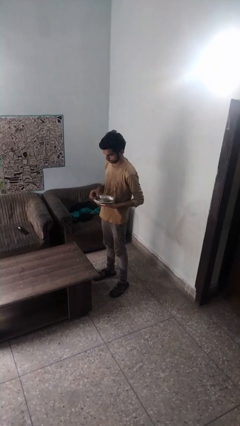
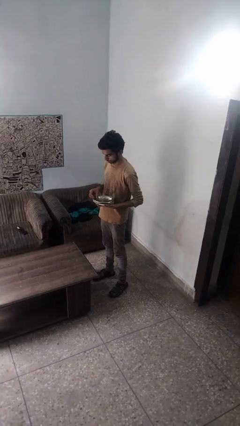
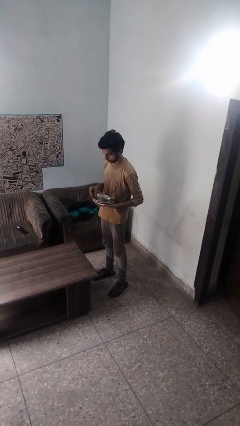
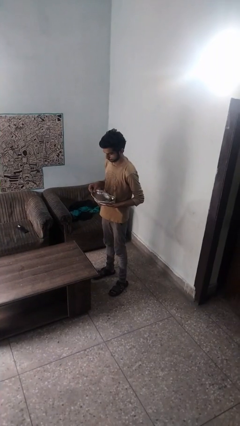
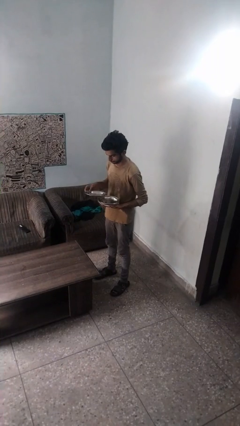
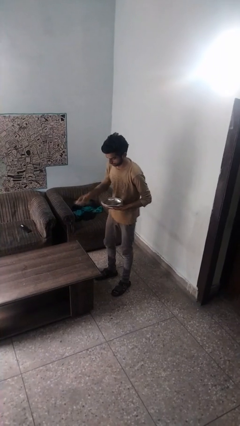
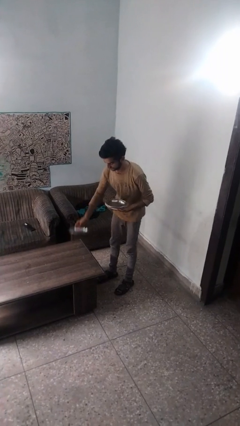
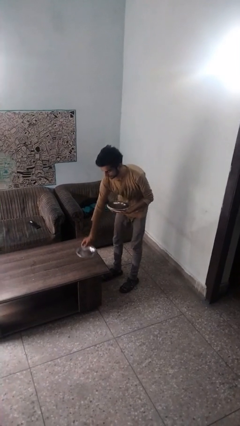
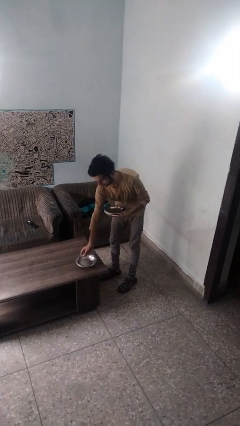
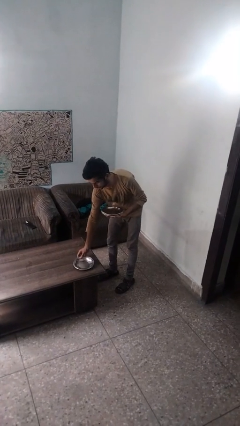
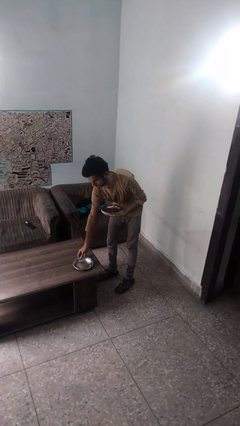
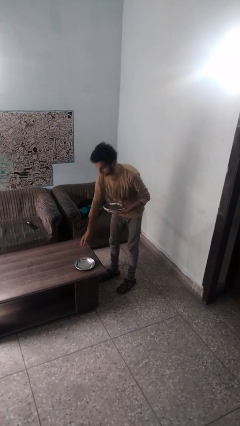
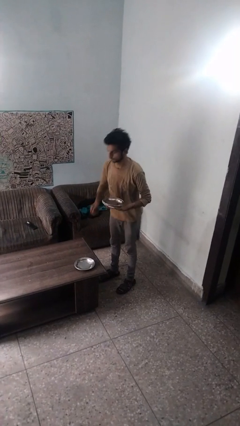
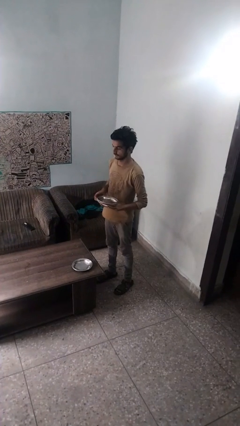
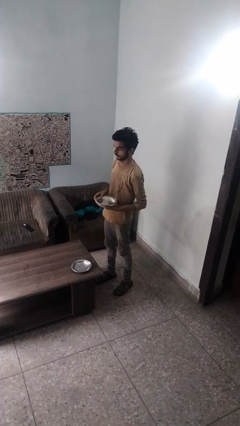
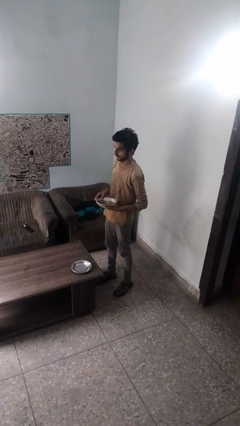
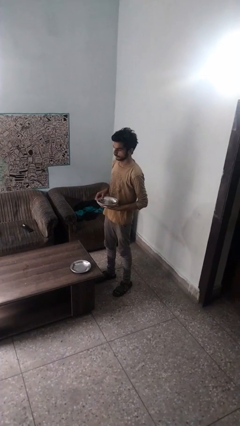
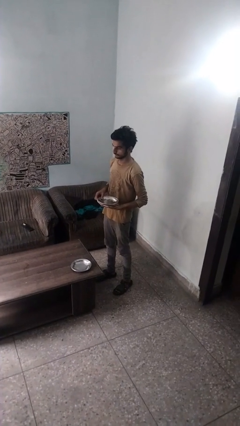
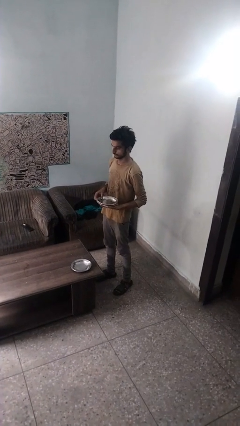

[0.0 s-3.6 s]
person sets table

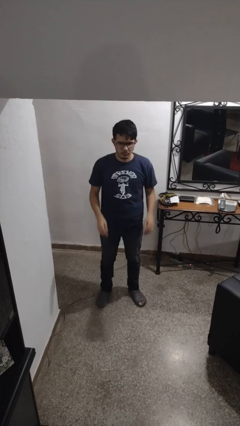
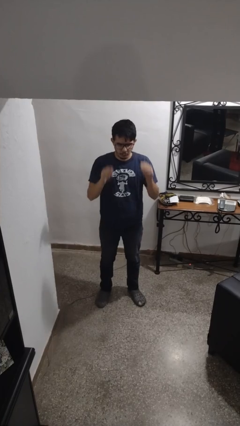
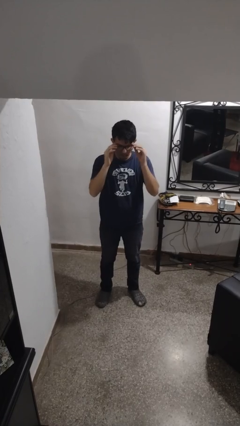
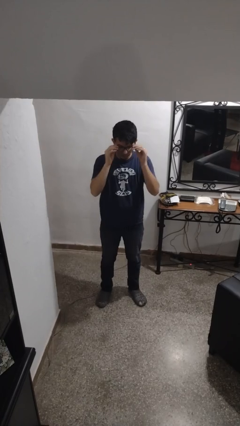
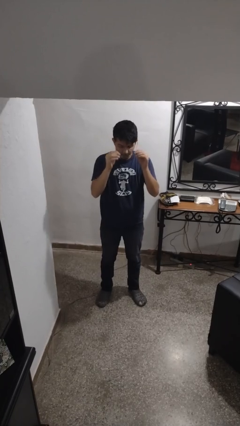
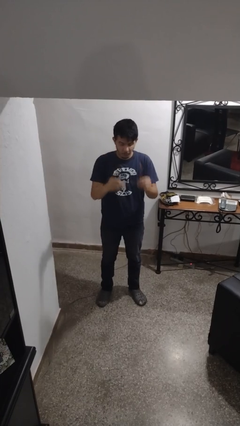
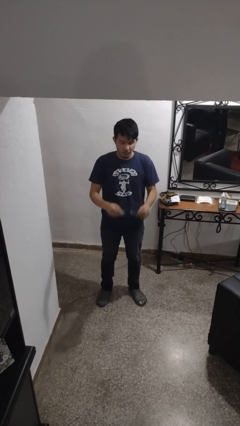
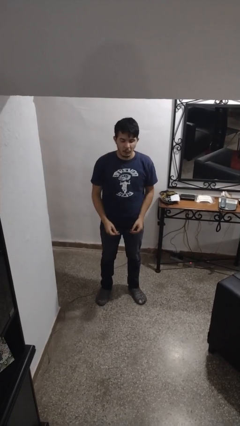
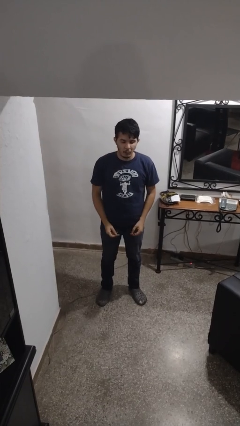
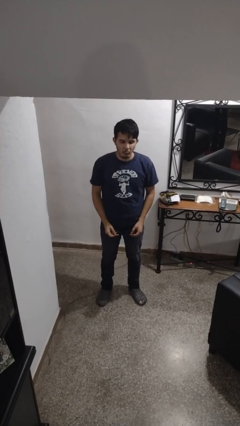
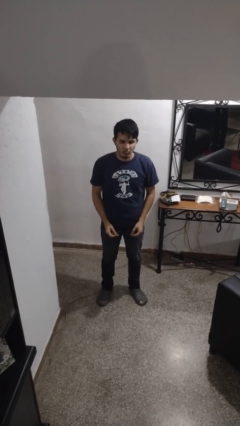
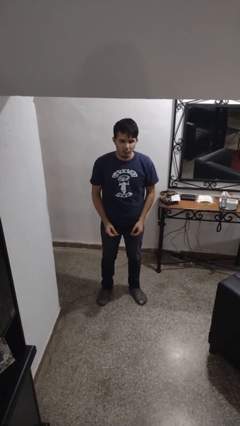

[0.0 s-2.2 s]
person takes off glasses

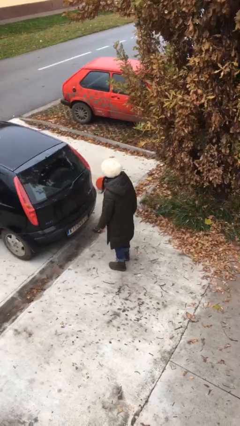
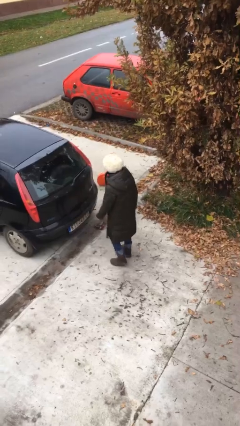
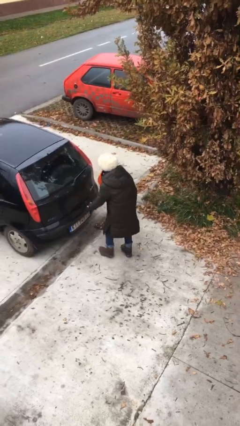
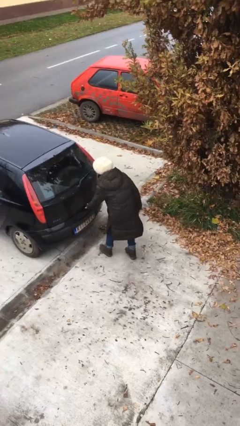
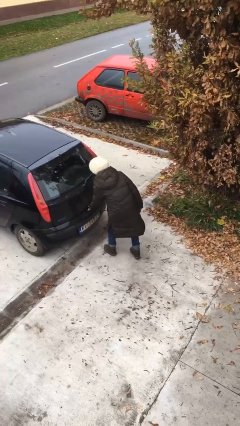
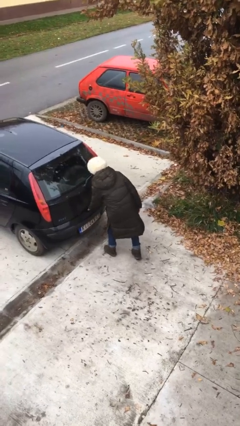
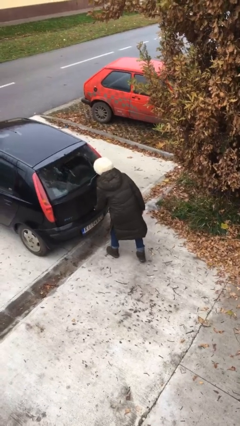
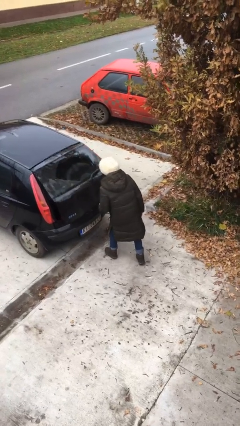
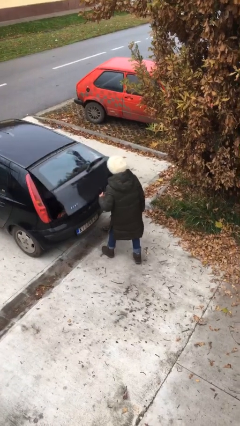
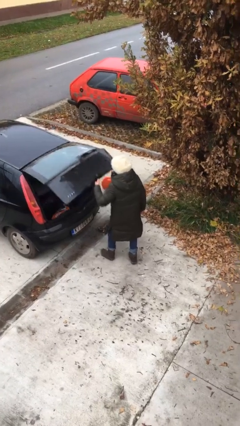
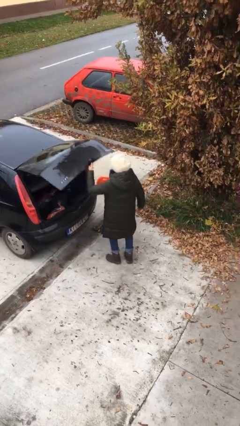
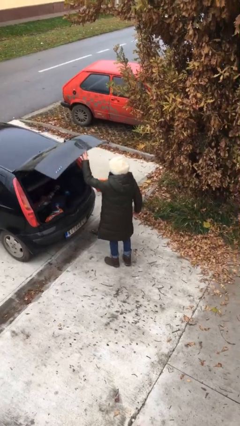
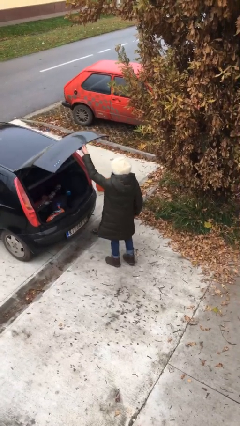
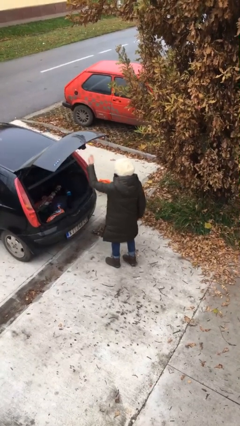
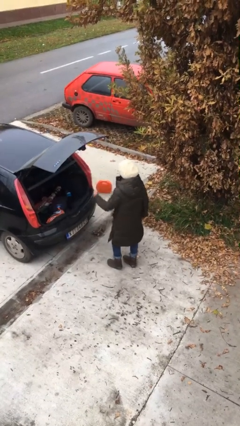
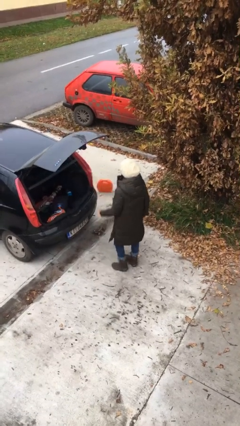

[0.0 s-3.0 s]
person opens car trunk

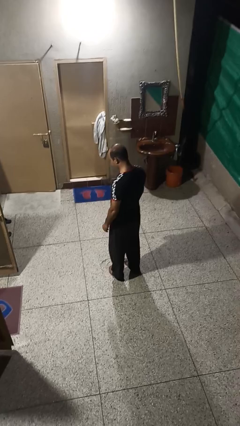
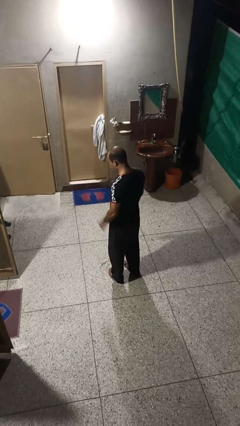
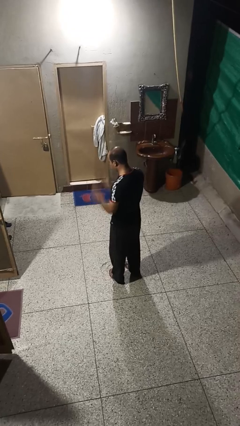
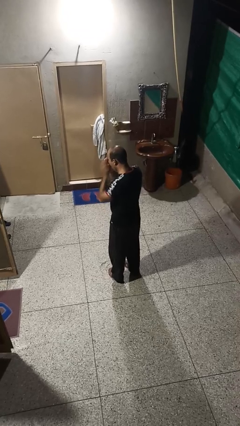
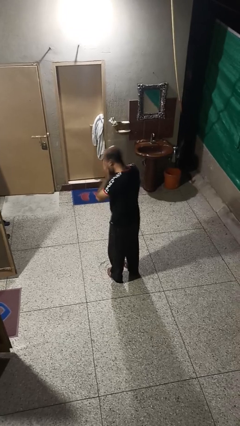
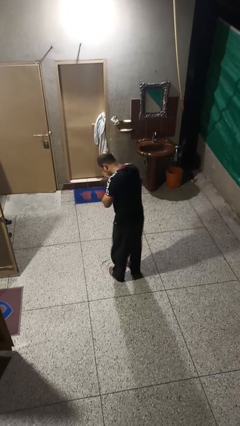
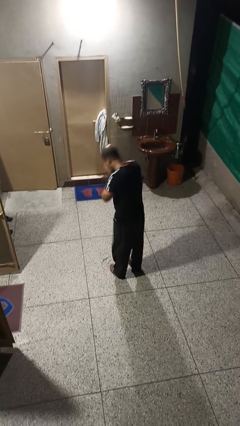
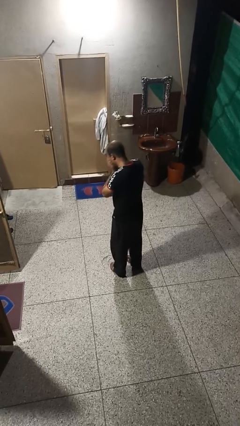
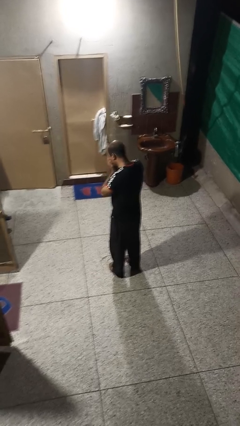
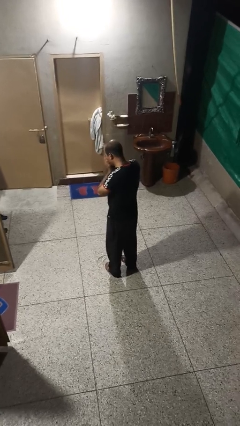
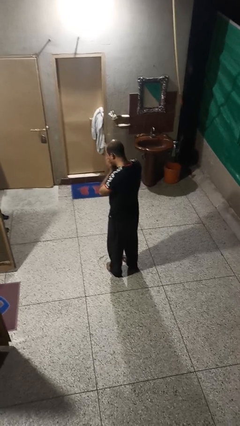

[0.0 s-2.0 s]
person sneezes into hand

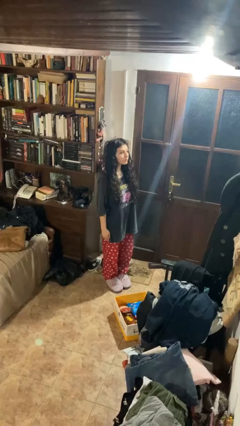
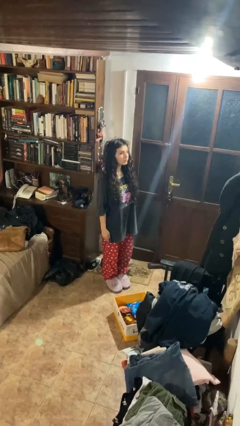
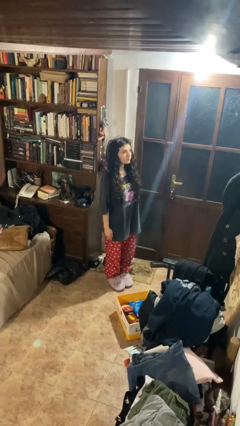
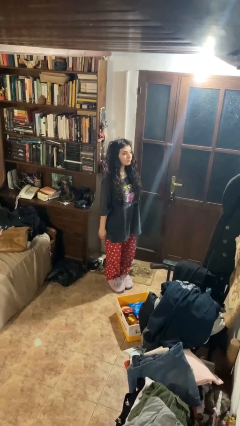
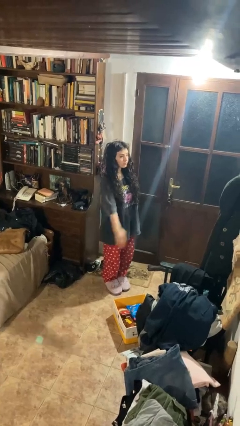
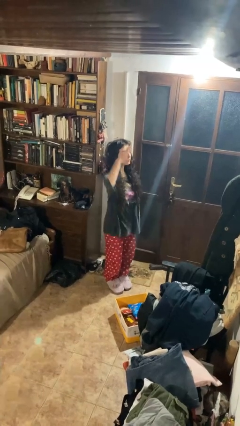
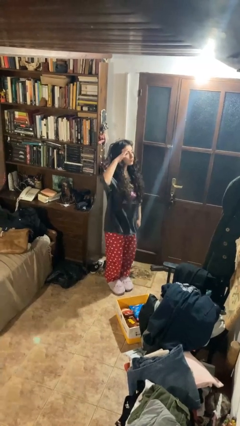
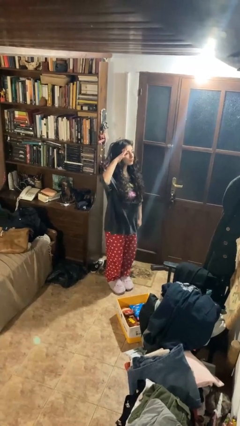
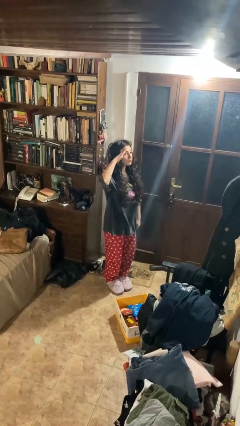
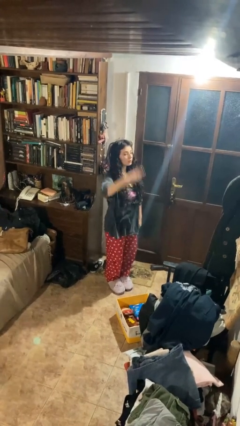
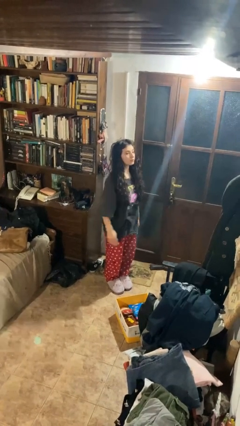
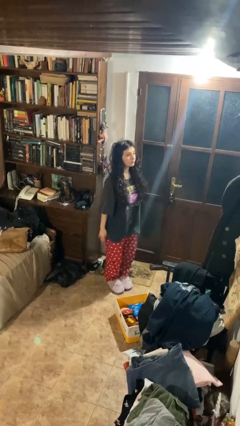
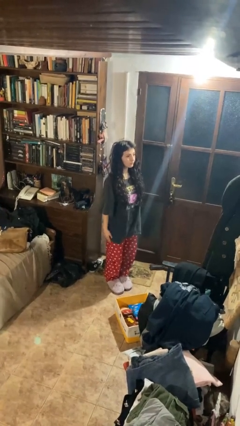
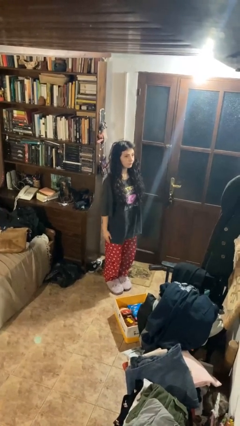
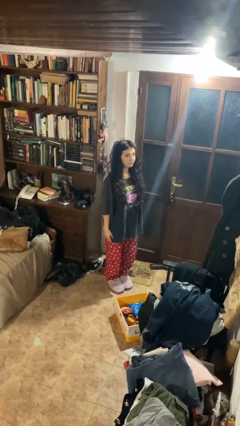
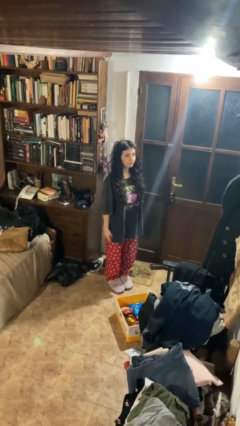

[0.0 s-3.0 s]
person salutes

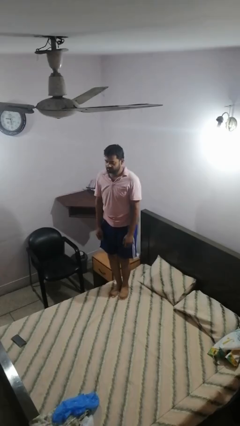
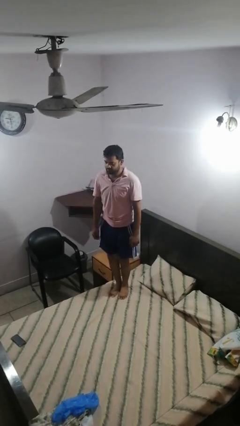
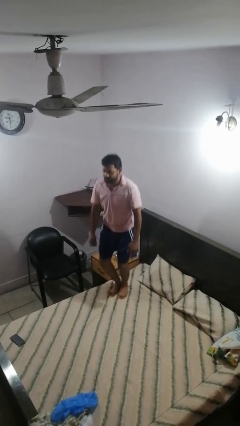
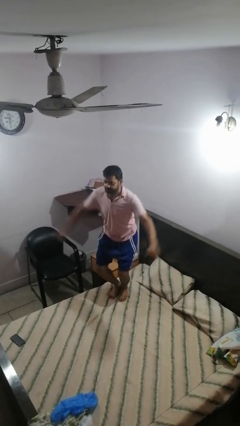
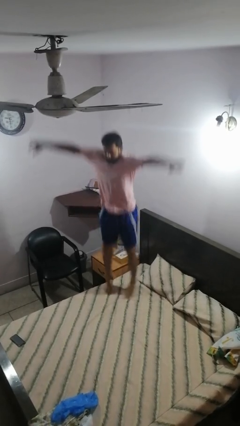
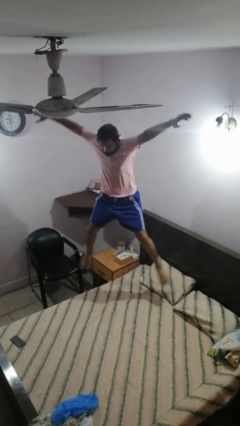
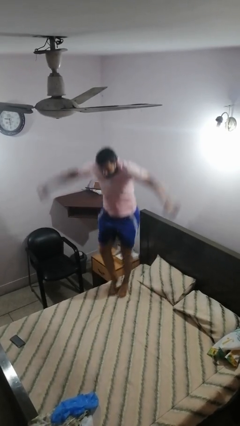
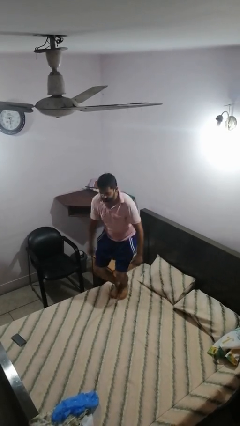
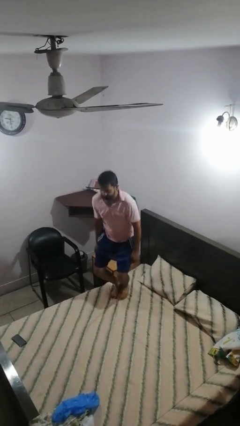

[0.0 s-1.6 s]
person jumps on bed

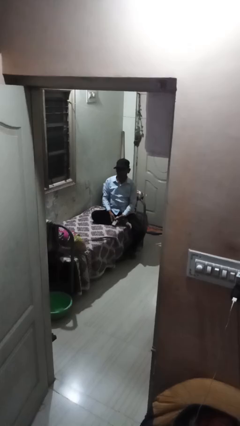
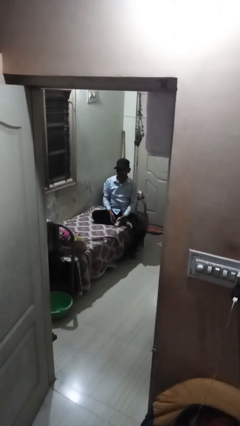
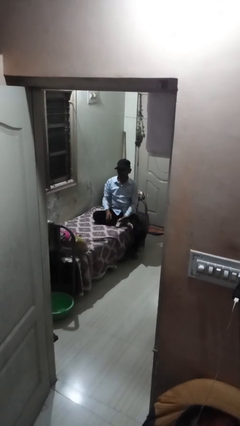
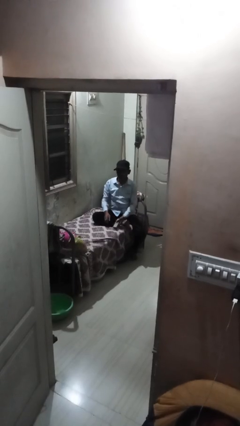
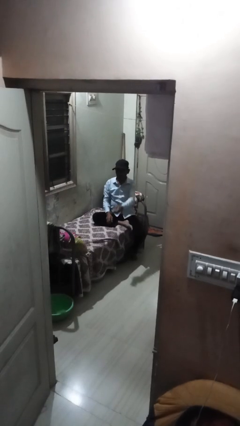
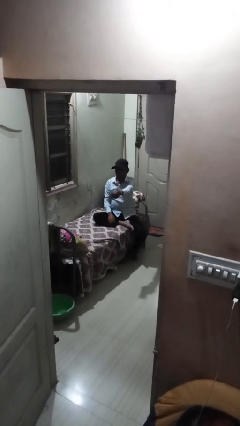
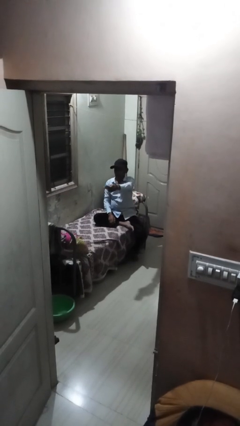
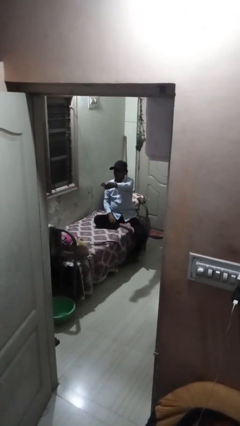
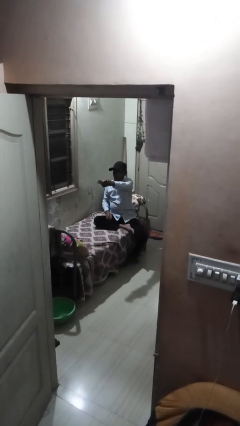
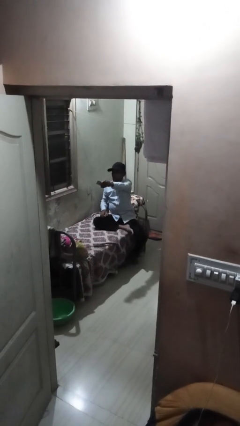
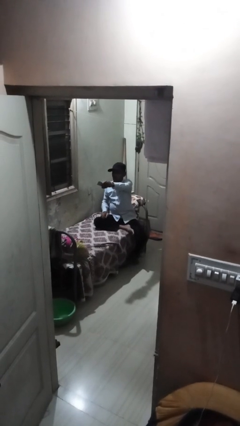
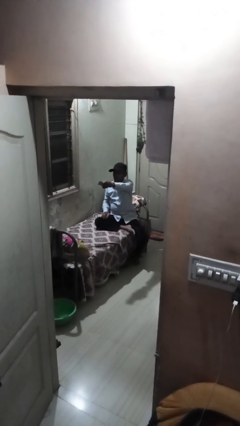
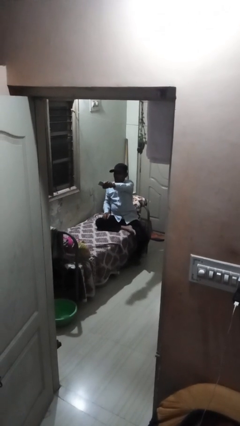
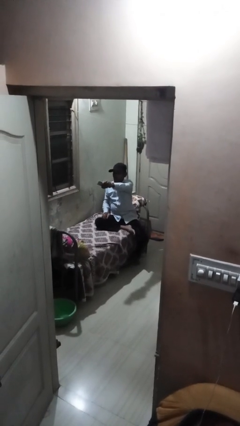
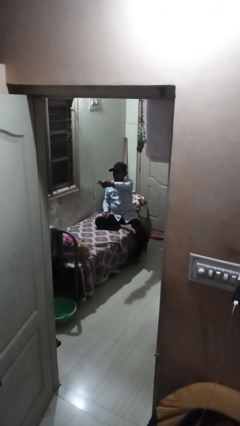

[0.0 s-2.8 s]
person uses television remote
